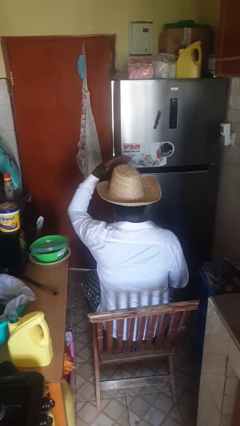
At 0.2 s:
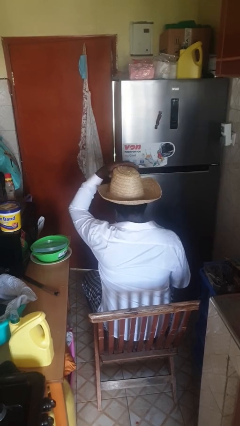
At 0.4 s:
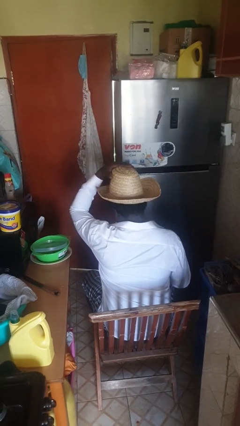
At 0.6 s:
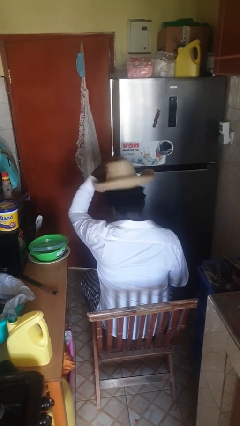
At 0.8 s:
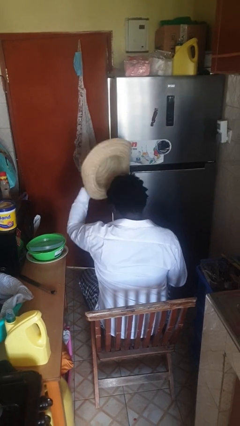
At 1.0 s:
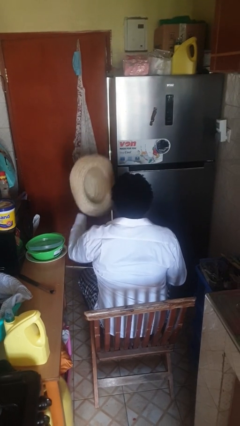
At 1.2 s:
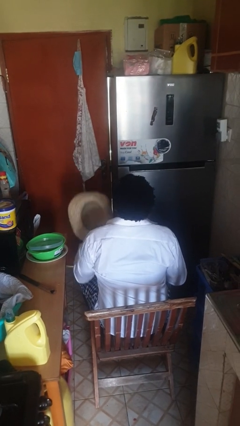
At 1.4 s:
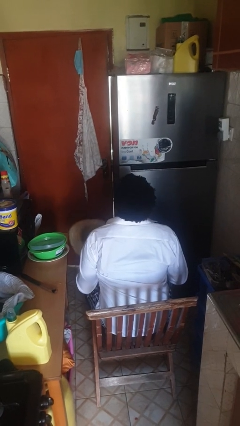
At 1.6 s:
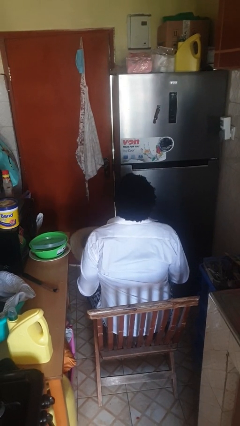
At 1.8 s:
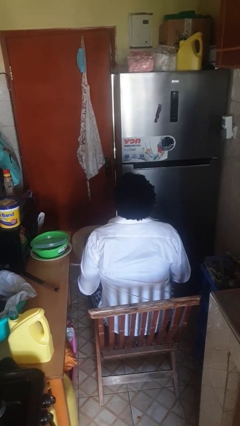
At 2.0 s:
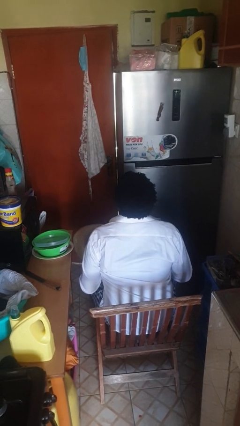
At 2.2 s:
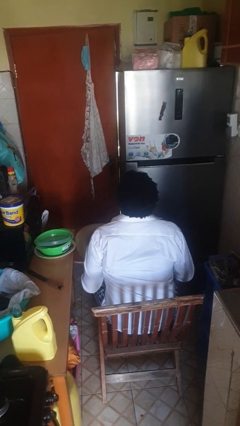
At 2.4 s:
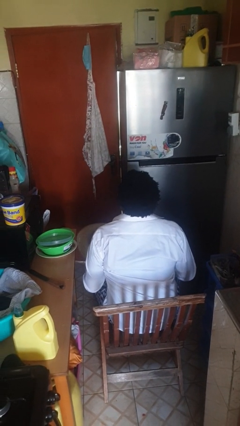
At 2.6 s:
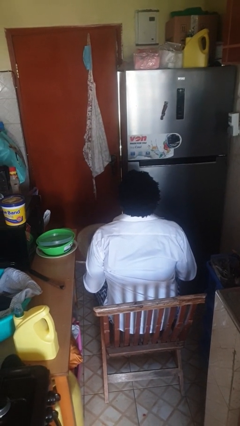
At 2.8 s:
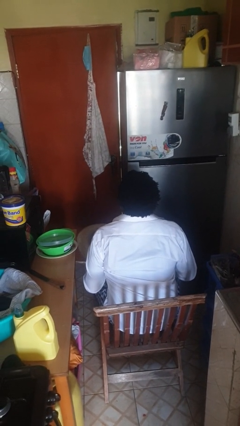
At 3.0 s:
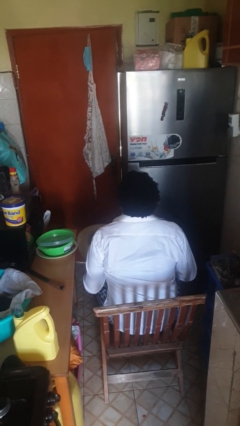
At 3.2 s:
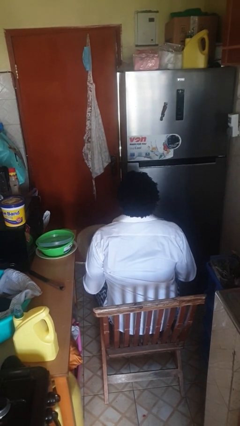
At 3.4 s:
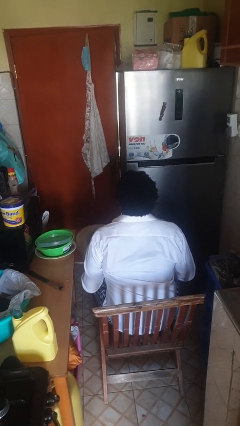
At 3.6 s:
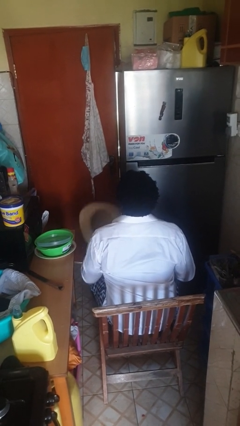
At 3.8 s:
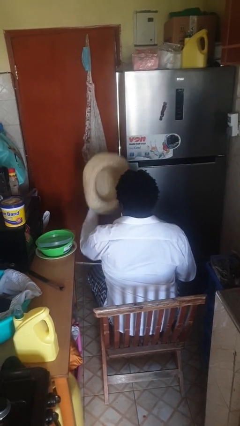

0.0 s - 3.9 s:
person takes off hat

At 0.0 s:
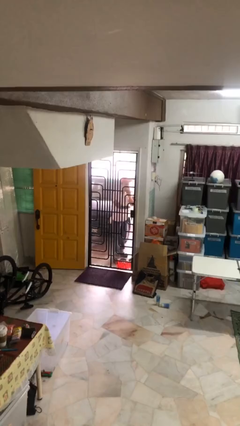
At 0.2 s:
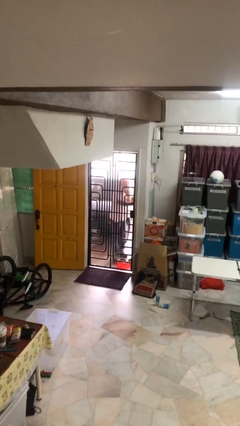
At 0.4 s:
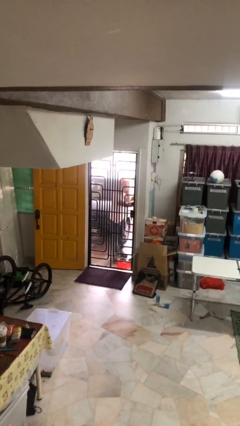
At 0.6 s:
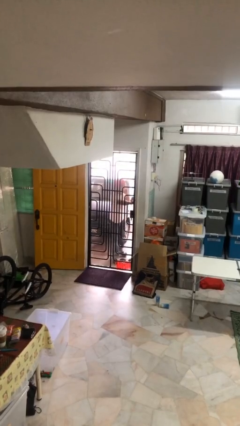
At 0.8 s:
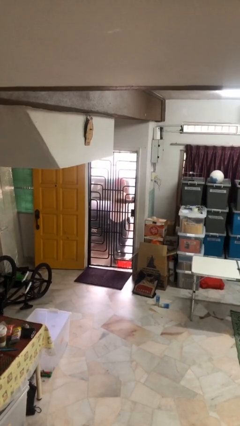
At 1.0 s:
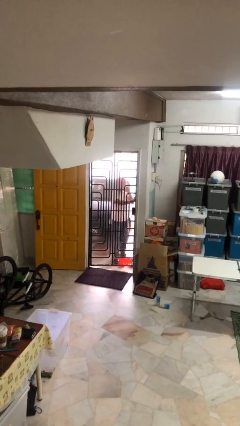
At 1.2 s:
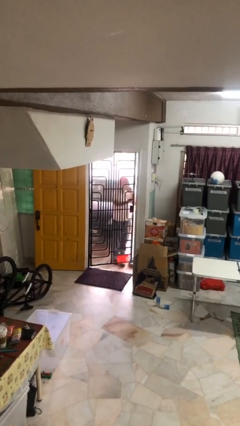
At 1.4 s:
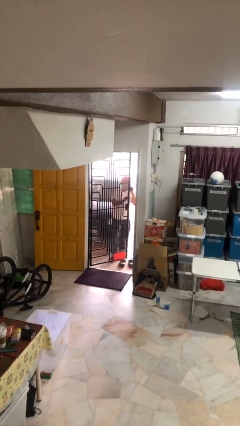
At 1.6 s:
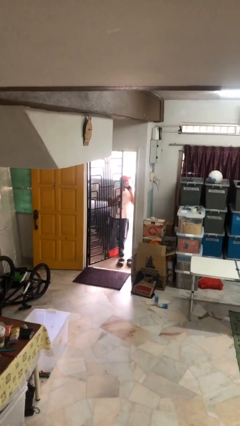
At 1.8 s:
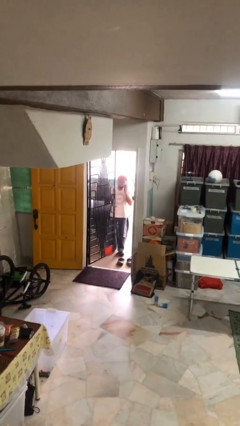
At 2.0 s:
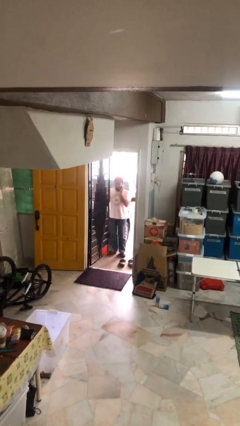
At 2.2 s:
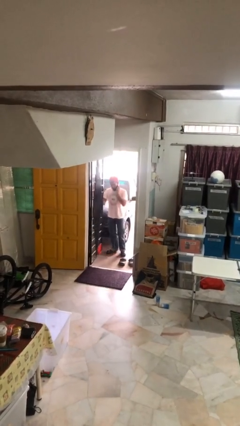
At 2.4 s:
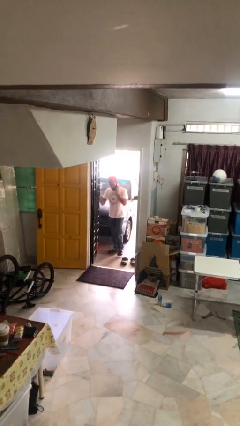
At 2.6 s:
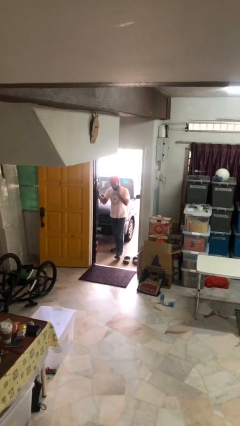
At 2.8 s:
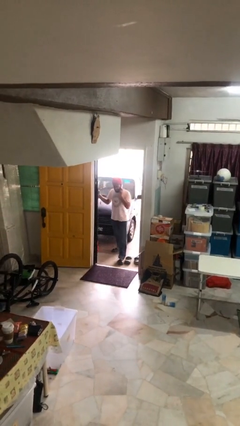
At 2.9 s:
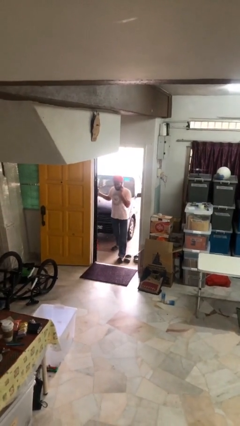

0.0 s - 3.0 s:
person opens facility door

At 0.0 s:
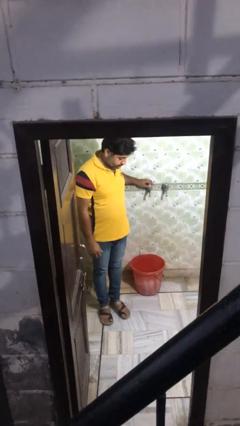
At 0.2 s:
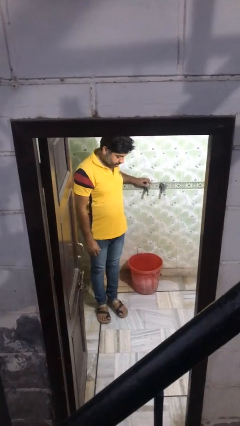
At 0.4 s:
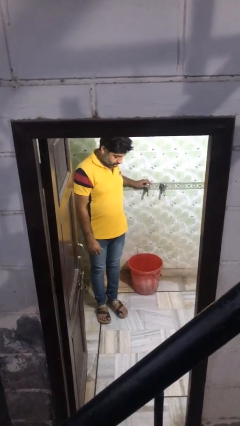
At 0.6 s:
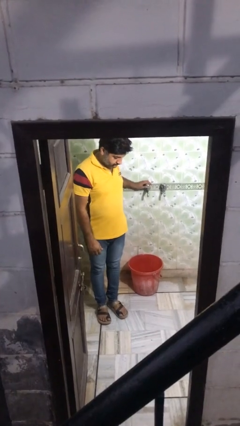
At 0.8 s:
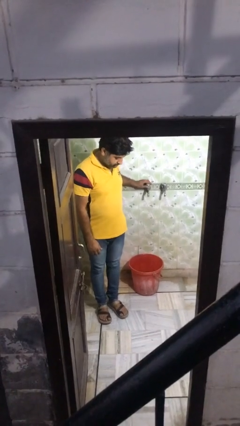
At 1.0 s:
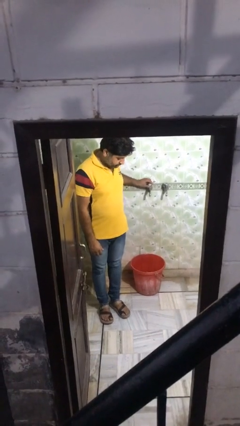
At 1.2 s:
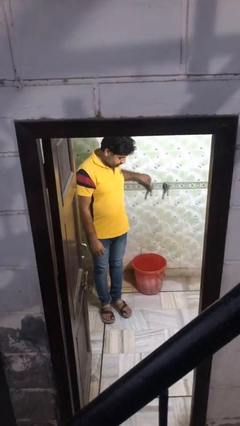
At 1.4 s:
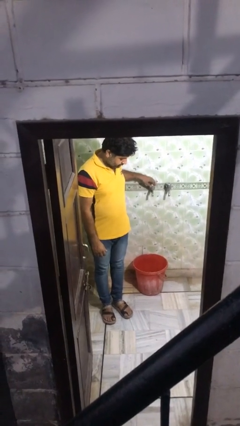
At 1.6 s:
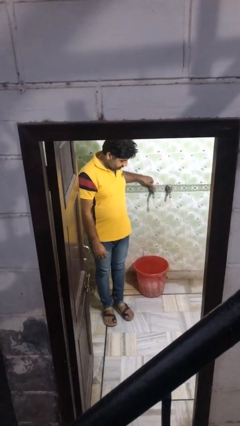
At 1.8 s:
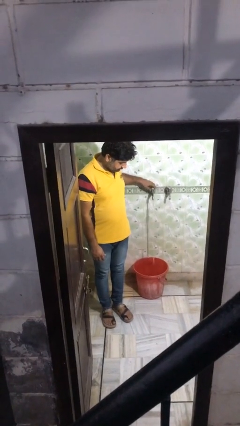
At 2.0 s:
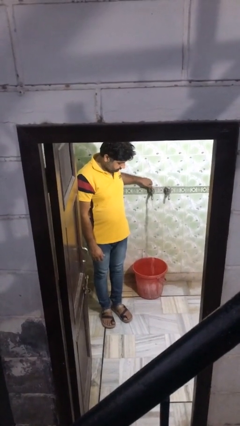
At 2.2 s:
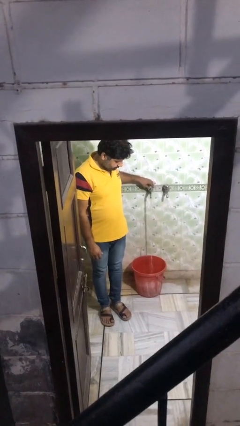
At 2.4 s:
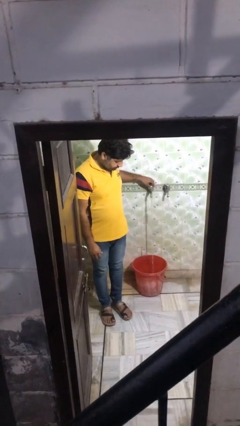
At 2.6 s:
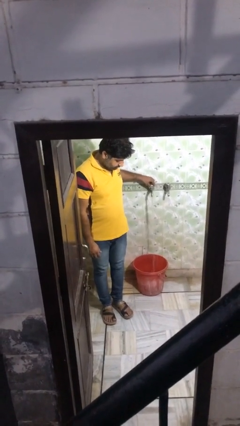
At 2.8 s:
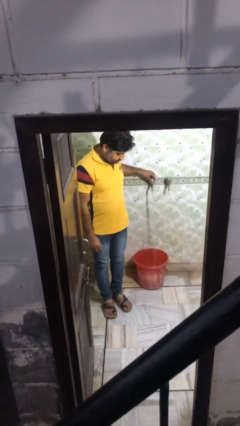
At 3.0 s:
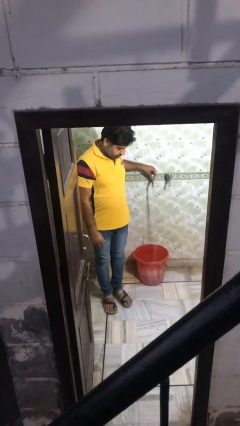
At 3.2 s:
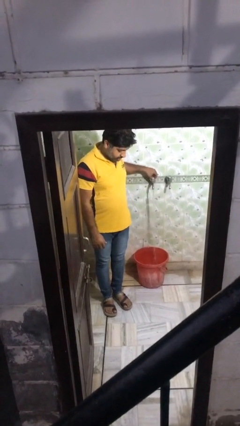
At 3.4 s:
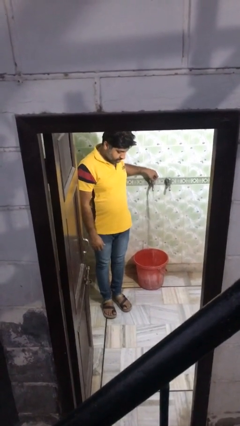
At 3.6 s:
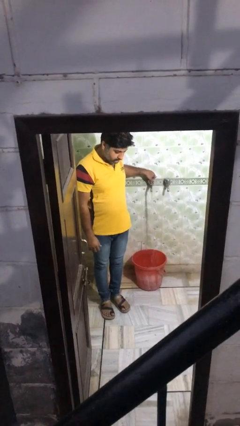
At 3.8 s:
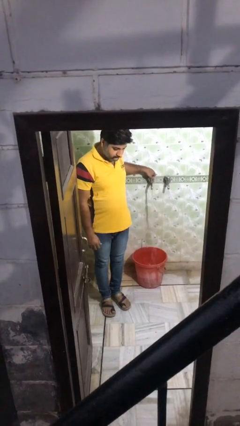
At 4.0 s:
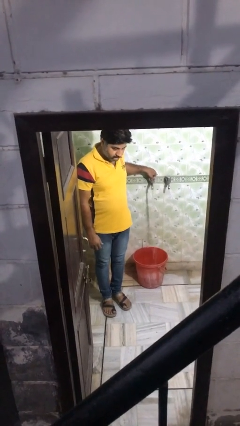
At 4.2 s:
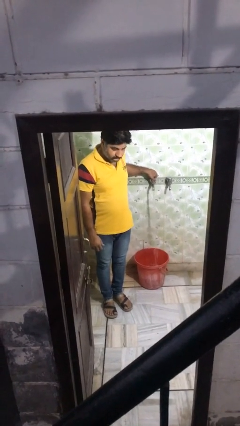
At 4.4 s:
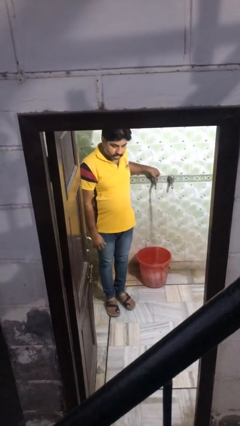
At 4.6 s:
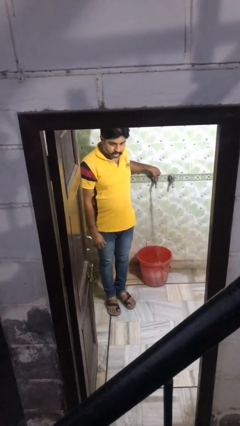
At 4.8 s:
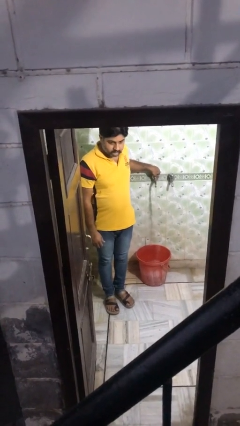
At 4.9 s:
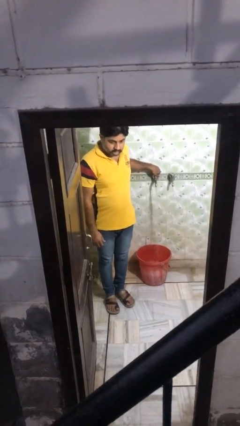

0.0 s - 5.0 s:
person turns on faucet

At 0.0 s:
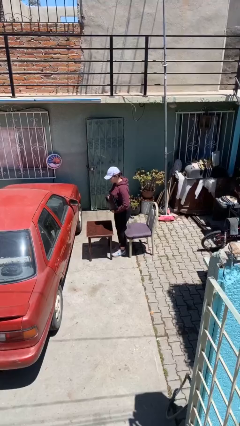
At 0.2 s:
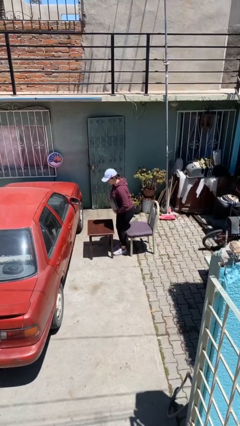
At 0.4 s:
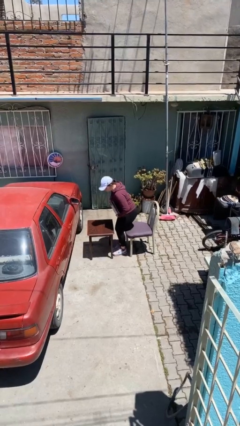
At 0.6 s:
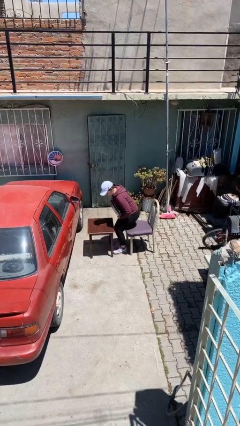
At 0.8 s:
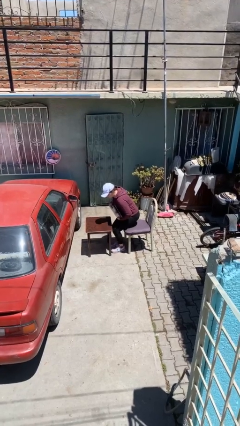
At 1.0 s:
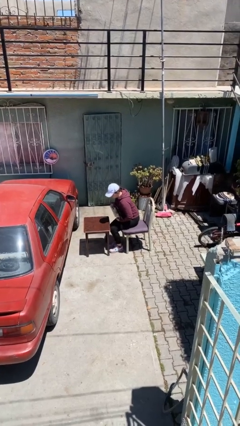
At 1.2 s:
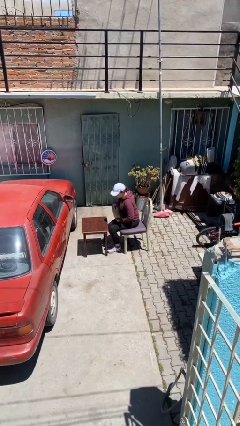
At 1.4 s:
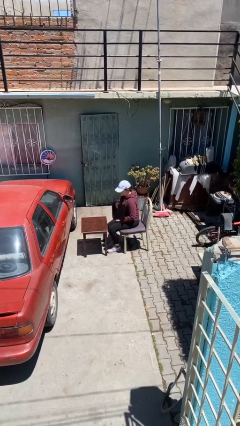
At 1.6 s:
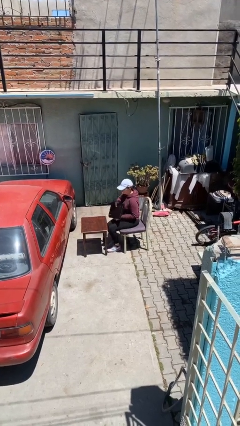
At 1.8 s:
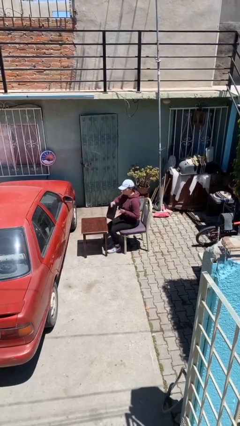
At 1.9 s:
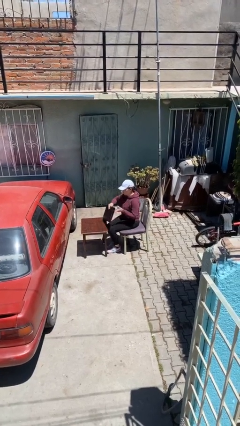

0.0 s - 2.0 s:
person sits down

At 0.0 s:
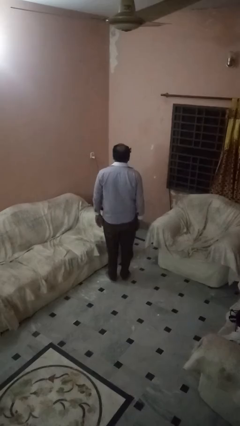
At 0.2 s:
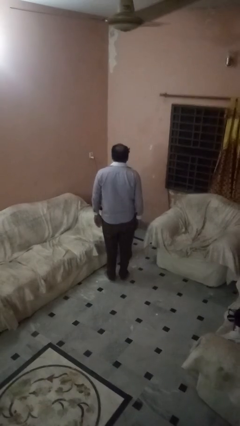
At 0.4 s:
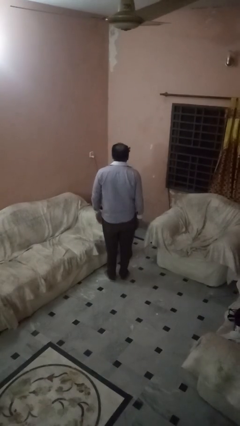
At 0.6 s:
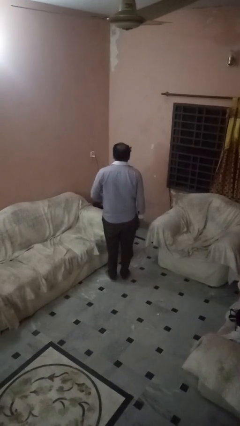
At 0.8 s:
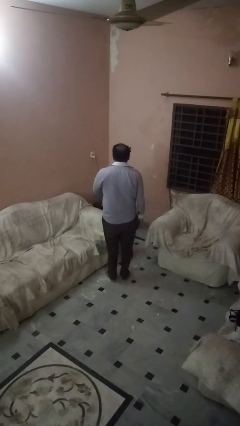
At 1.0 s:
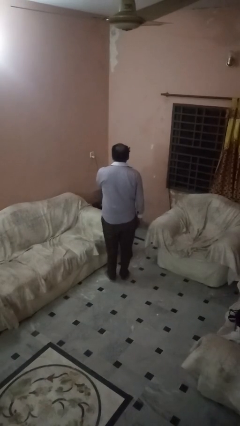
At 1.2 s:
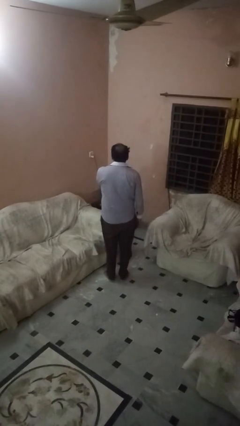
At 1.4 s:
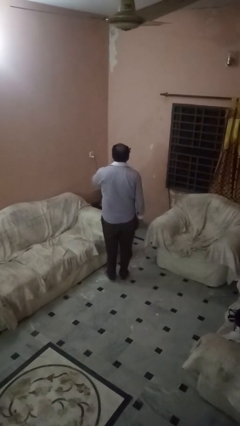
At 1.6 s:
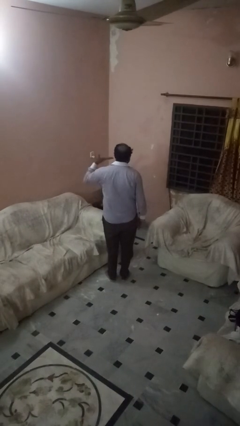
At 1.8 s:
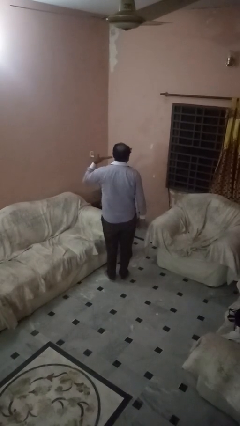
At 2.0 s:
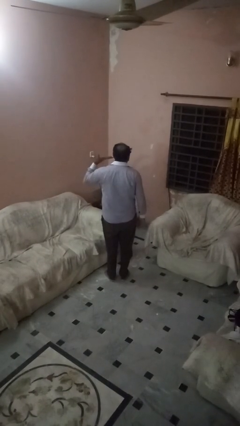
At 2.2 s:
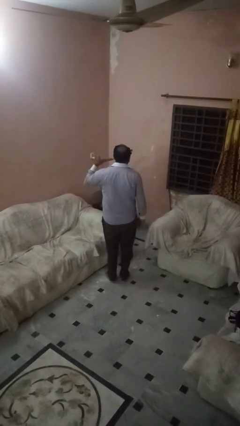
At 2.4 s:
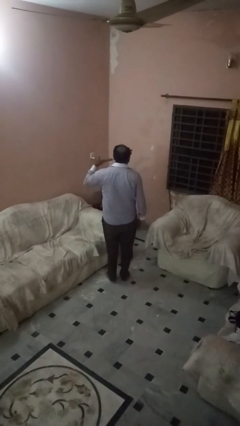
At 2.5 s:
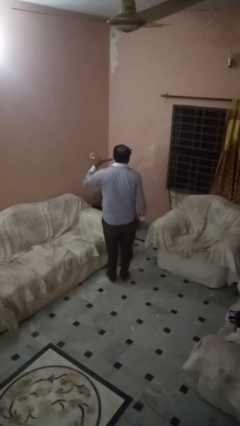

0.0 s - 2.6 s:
person gestures cut

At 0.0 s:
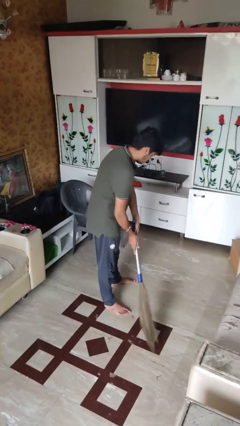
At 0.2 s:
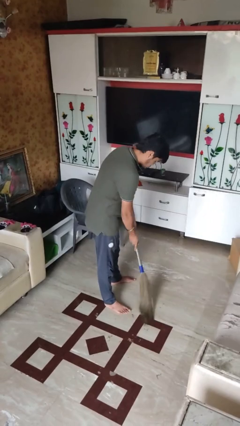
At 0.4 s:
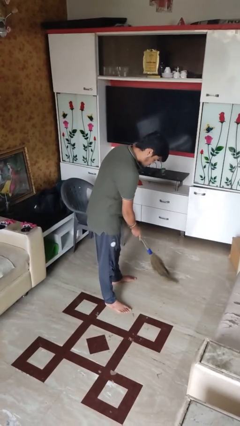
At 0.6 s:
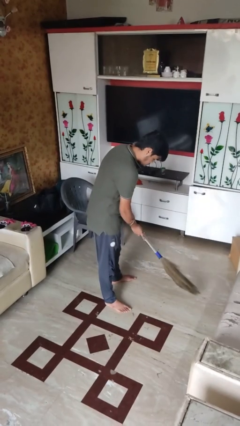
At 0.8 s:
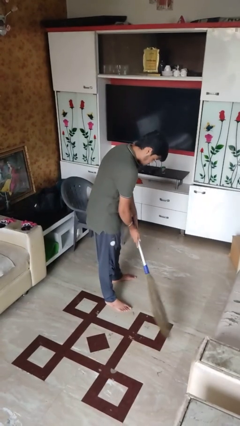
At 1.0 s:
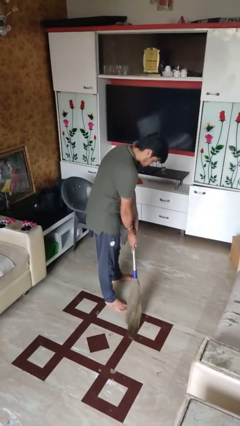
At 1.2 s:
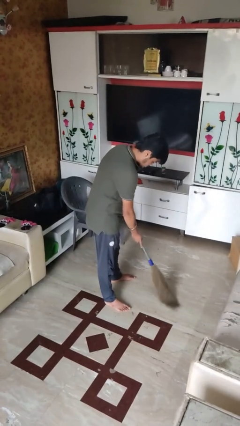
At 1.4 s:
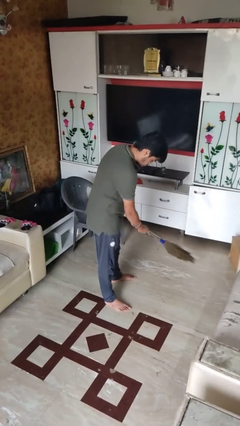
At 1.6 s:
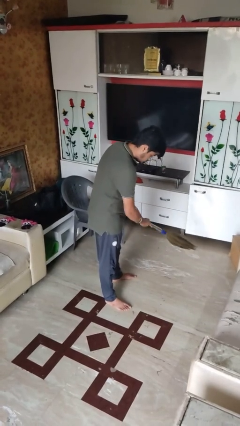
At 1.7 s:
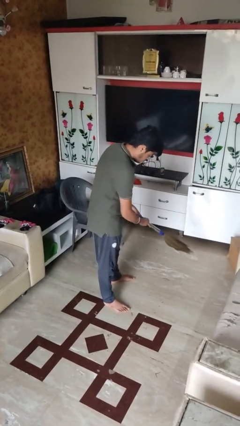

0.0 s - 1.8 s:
person sweeps floor
